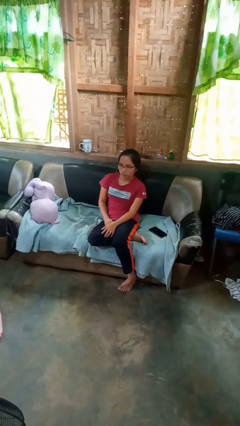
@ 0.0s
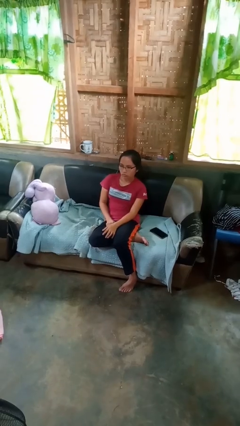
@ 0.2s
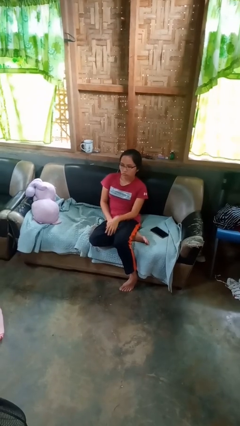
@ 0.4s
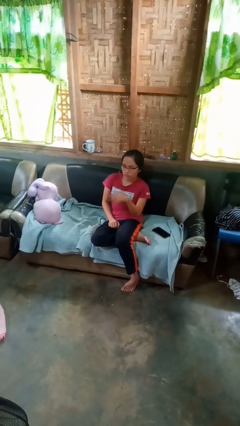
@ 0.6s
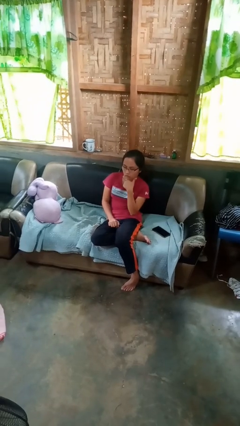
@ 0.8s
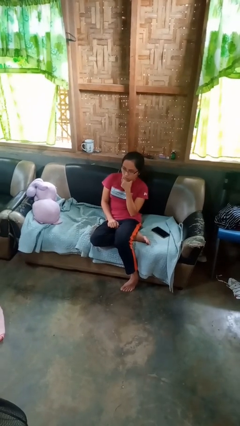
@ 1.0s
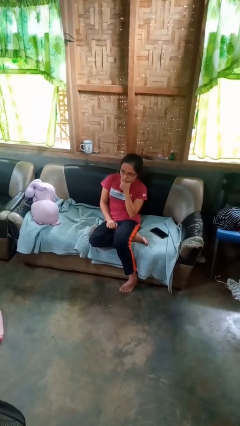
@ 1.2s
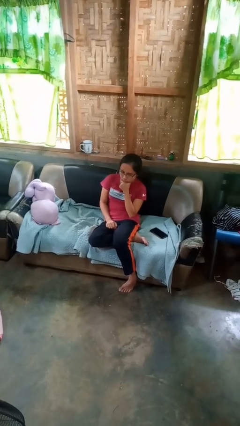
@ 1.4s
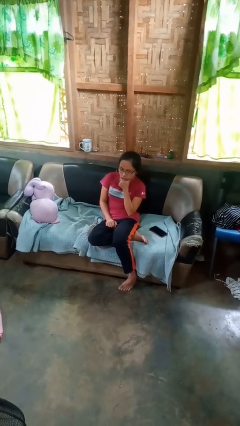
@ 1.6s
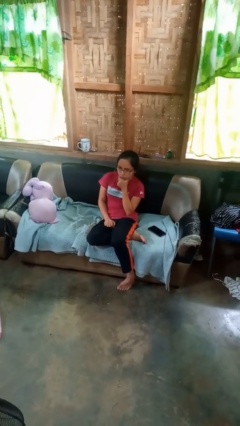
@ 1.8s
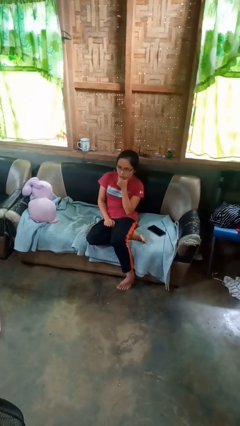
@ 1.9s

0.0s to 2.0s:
person strokes chin

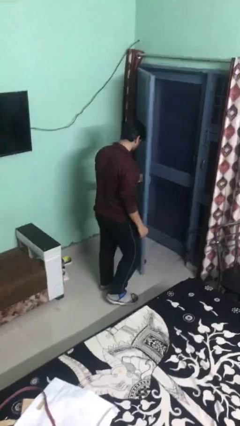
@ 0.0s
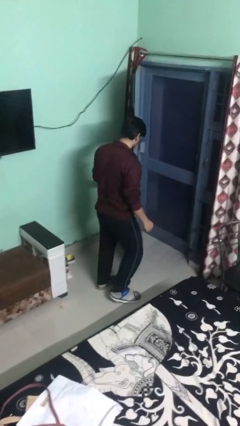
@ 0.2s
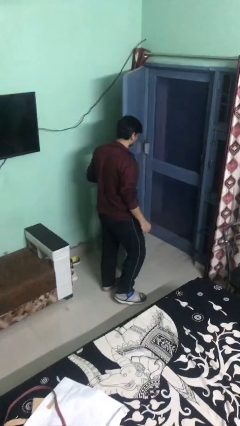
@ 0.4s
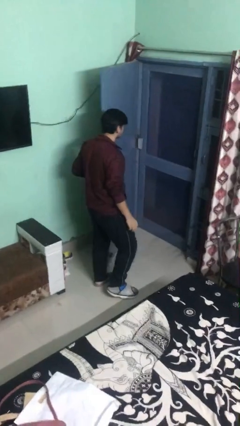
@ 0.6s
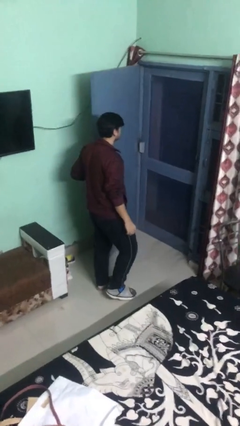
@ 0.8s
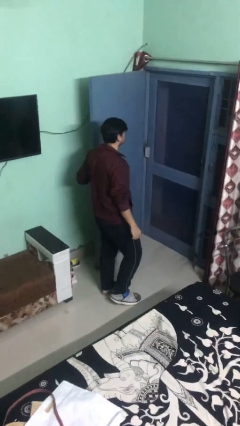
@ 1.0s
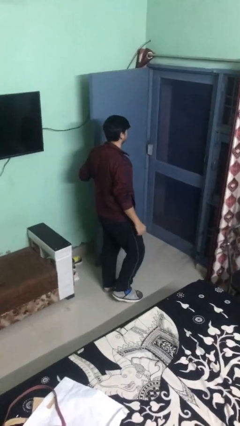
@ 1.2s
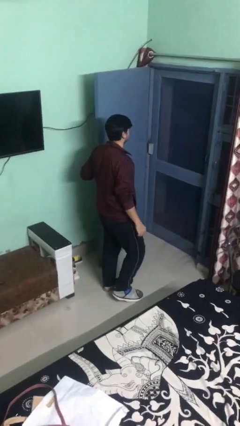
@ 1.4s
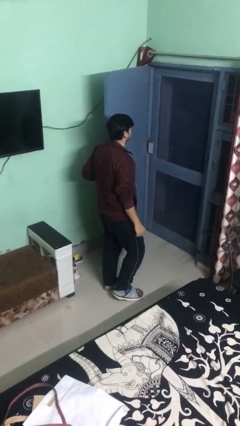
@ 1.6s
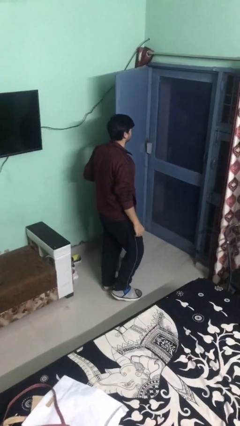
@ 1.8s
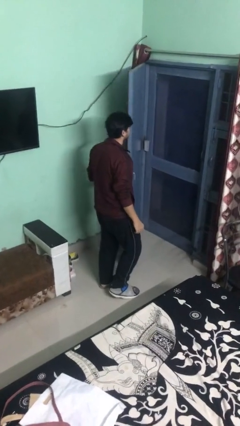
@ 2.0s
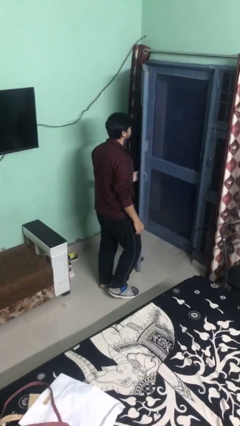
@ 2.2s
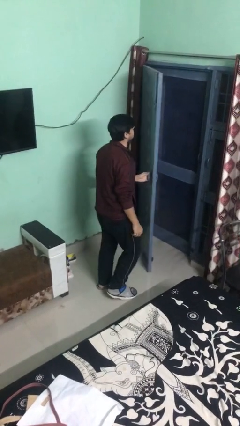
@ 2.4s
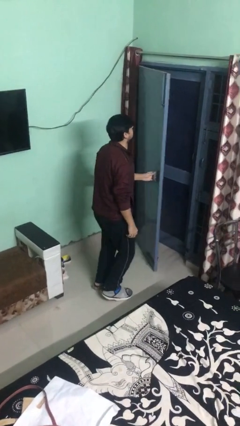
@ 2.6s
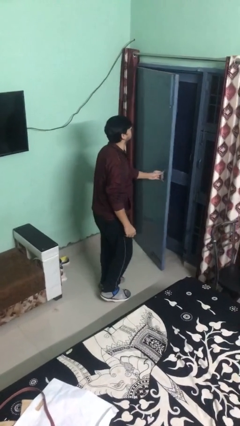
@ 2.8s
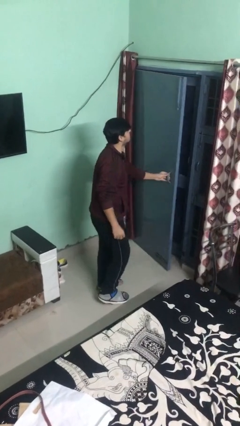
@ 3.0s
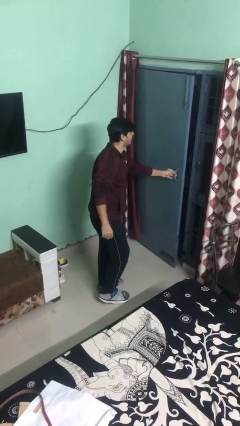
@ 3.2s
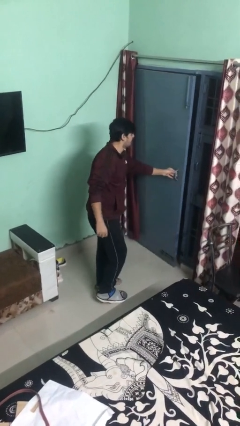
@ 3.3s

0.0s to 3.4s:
person closes facility door

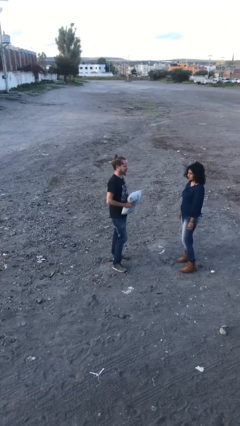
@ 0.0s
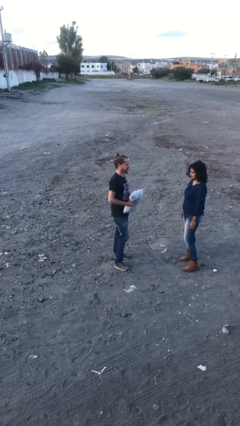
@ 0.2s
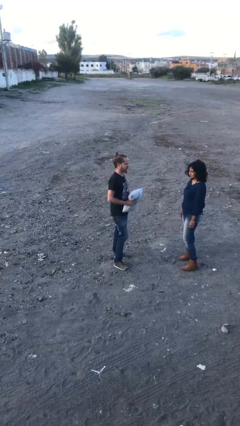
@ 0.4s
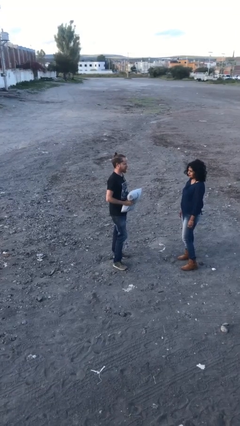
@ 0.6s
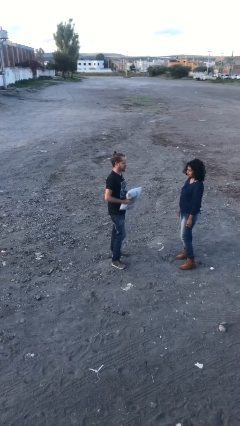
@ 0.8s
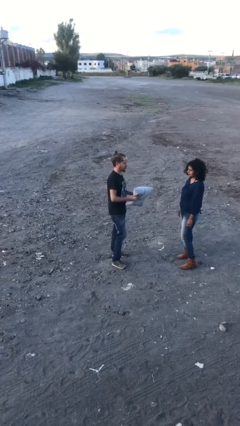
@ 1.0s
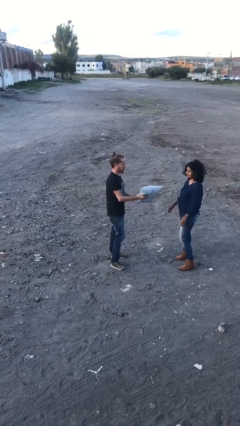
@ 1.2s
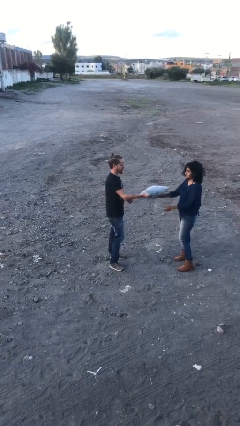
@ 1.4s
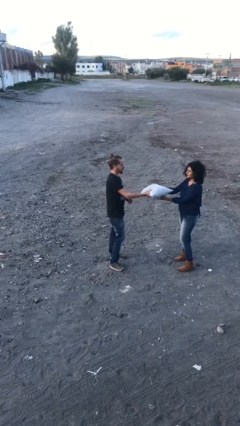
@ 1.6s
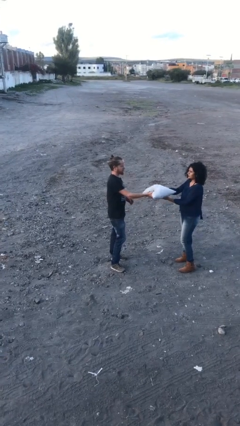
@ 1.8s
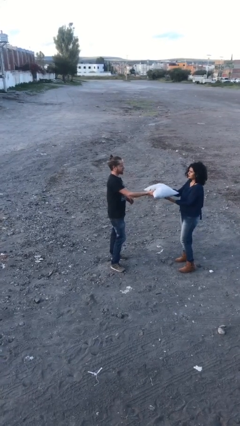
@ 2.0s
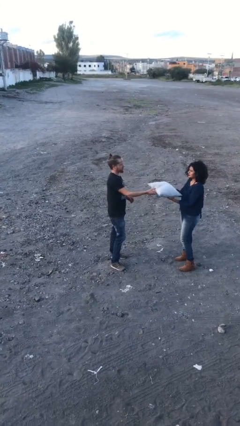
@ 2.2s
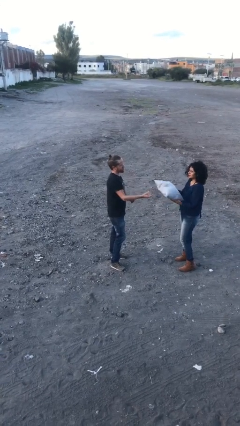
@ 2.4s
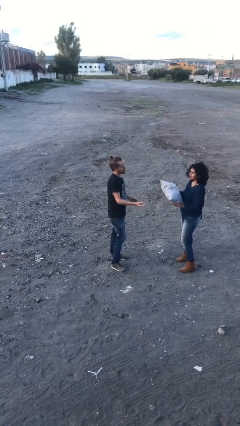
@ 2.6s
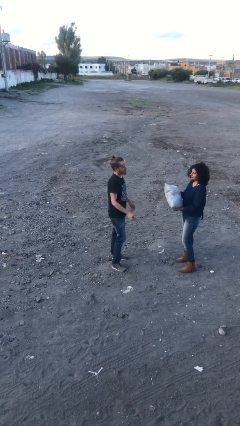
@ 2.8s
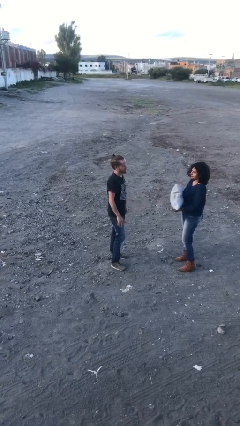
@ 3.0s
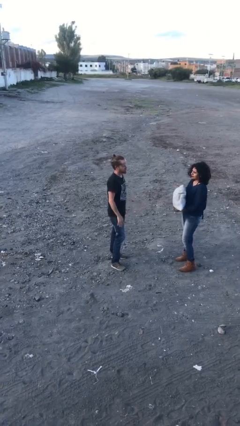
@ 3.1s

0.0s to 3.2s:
person transfers object to person

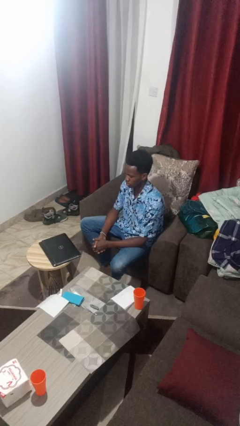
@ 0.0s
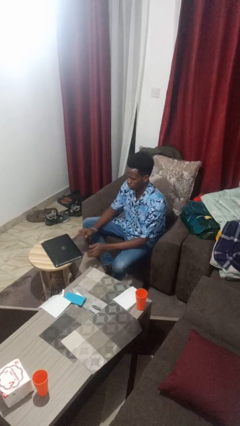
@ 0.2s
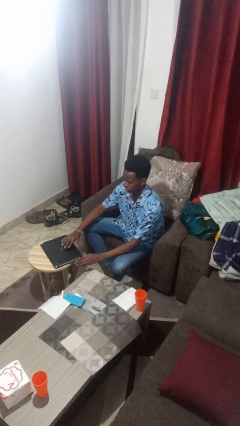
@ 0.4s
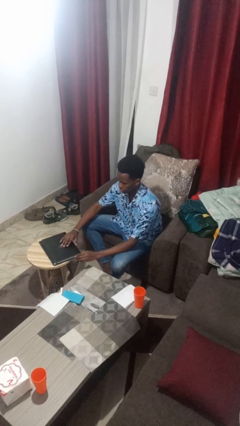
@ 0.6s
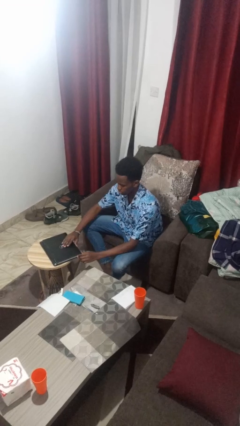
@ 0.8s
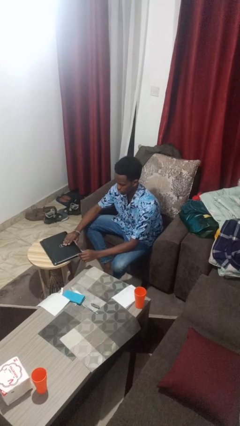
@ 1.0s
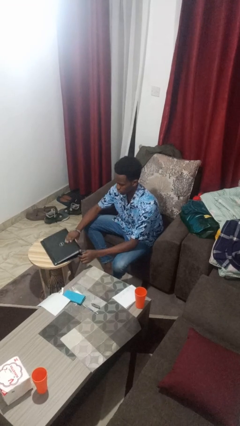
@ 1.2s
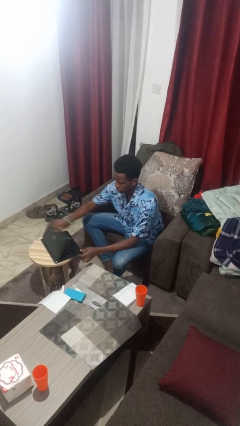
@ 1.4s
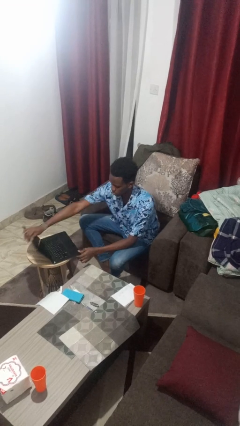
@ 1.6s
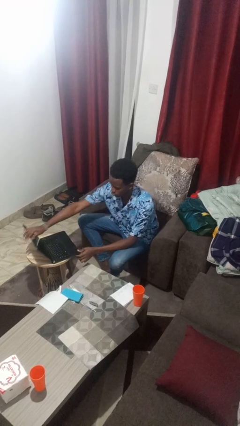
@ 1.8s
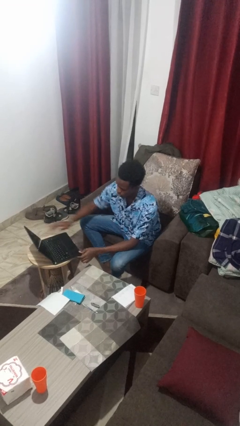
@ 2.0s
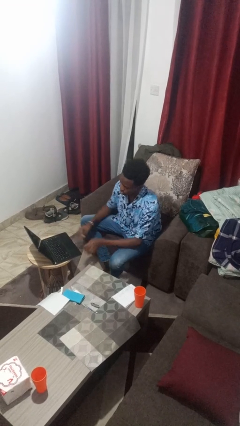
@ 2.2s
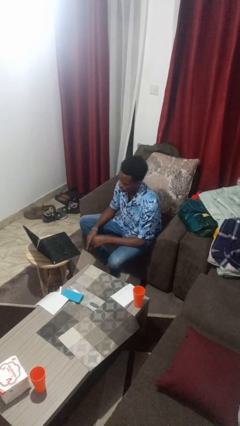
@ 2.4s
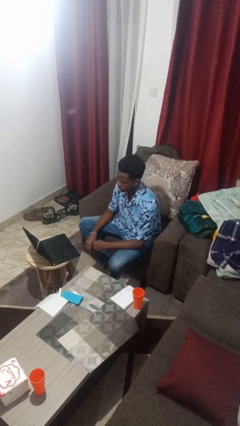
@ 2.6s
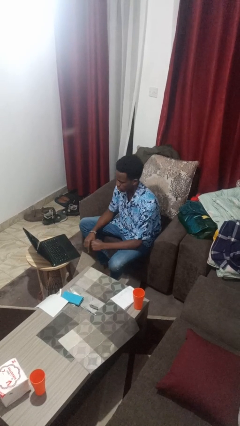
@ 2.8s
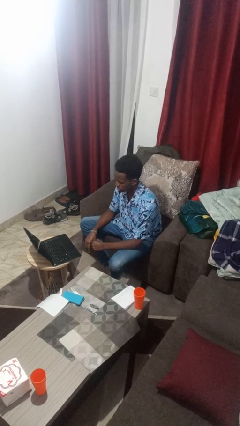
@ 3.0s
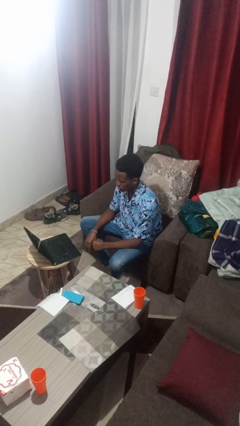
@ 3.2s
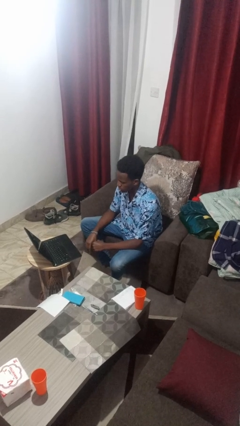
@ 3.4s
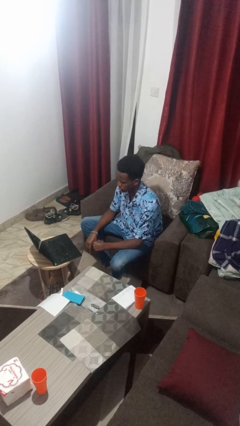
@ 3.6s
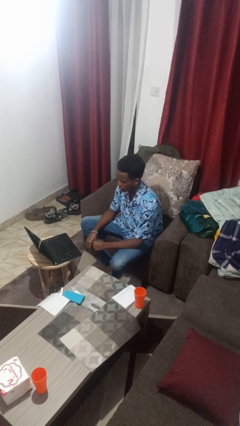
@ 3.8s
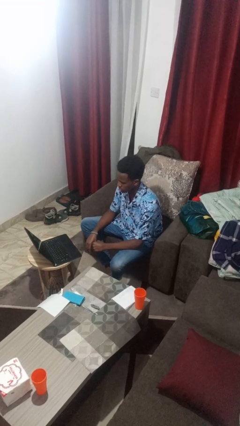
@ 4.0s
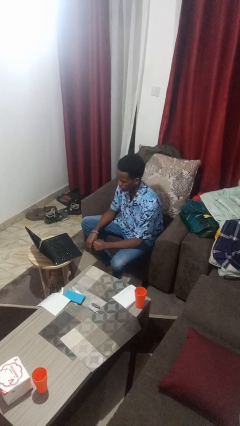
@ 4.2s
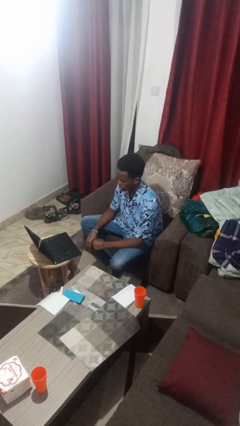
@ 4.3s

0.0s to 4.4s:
person opens laptop

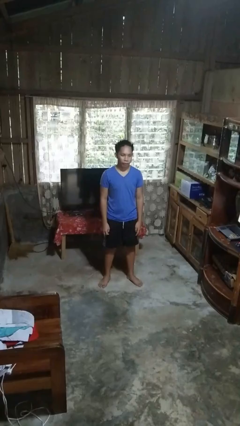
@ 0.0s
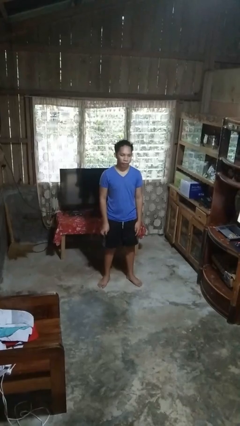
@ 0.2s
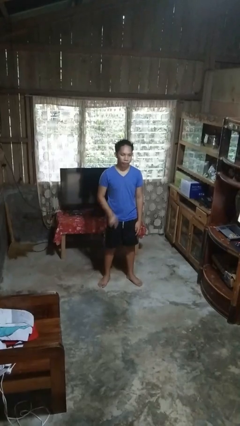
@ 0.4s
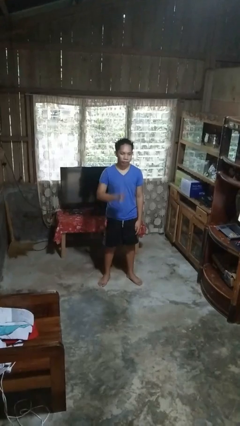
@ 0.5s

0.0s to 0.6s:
person gestures number three

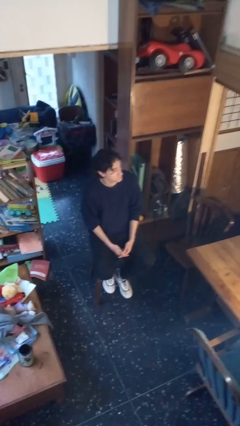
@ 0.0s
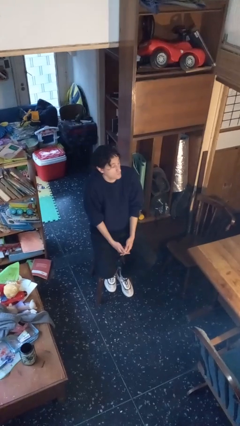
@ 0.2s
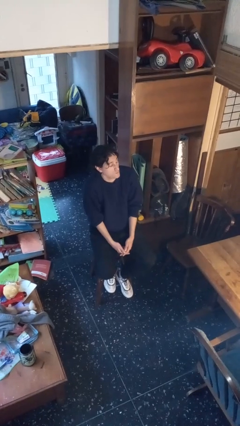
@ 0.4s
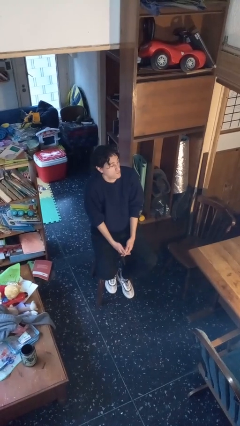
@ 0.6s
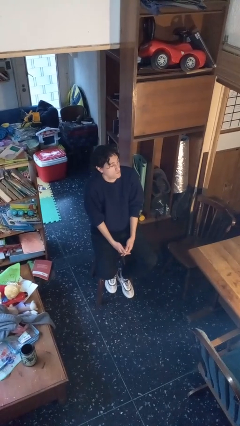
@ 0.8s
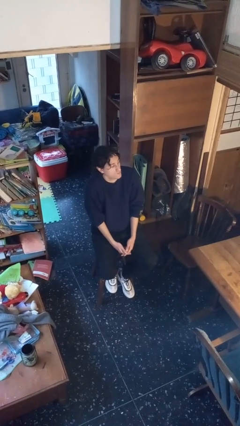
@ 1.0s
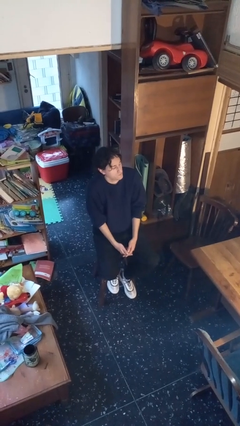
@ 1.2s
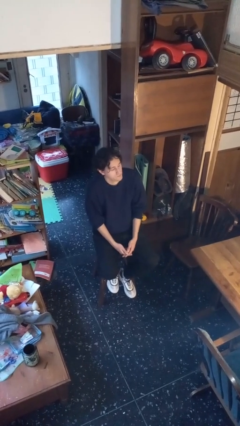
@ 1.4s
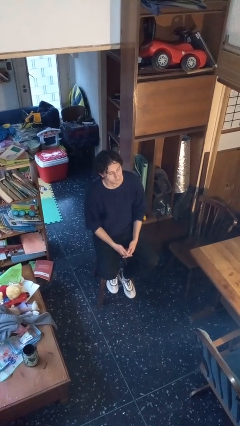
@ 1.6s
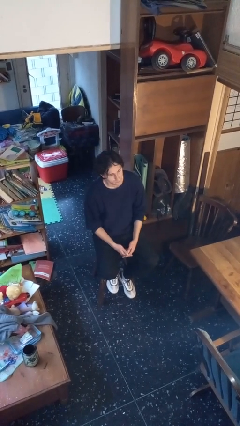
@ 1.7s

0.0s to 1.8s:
person shrugs

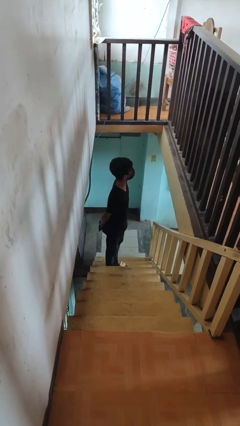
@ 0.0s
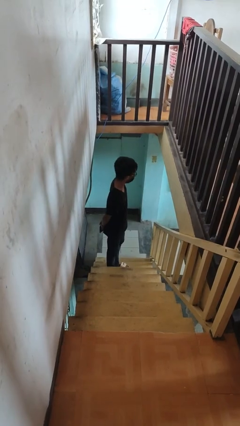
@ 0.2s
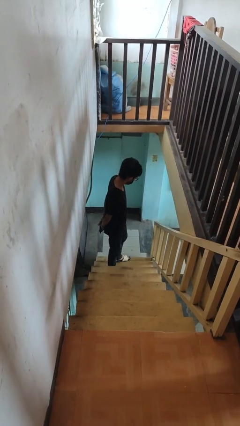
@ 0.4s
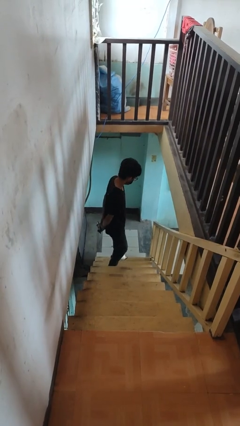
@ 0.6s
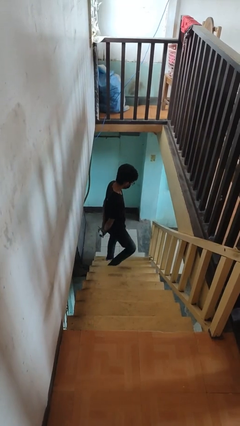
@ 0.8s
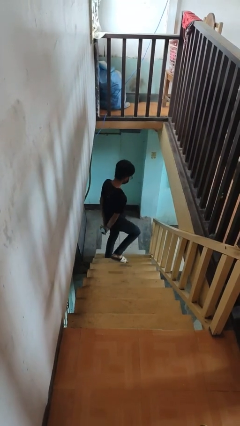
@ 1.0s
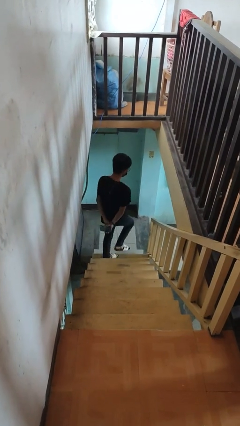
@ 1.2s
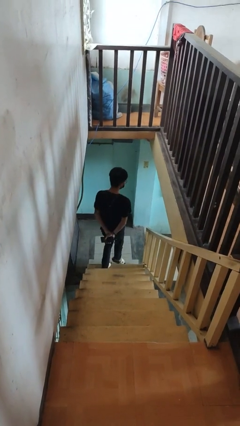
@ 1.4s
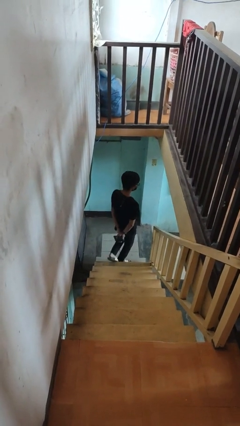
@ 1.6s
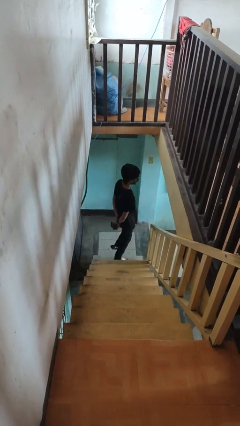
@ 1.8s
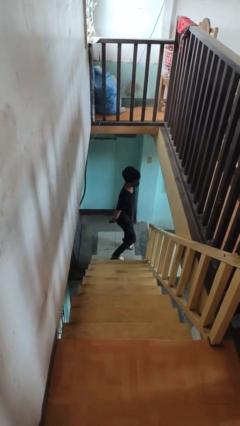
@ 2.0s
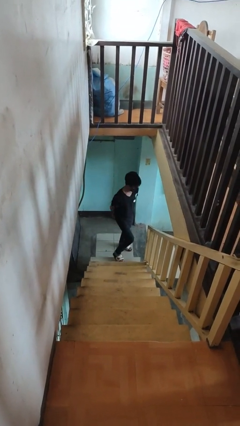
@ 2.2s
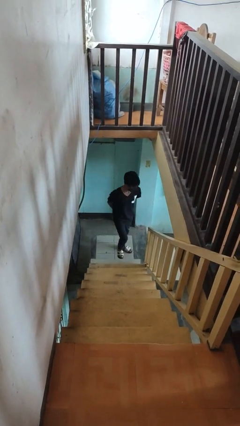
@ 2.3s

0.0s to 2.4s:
person climbs down ladder
